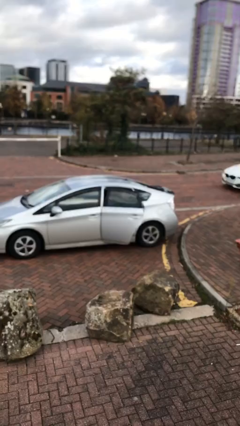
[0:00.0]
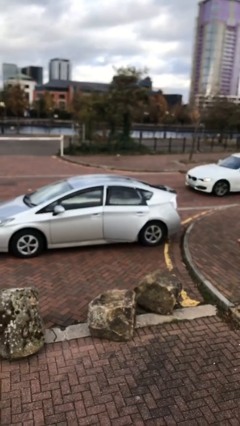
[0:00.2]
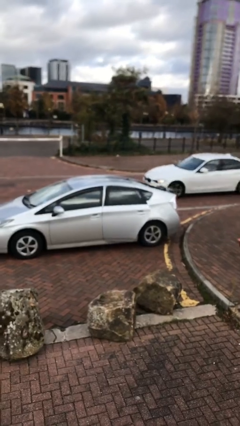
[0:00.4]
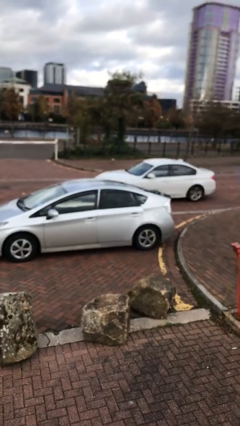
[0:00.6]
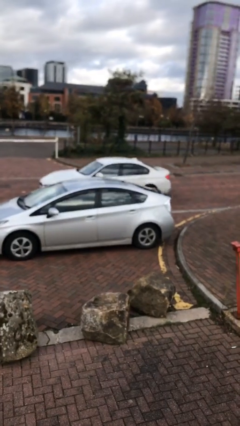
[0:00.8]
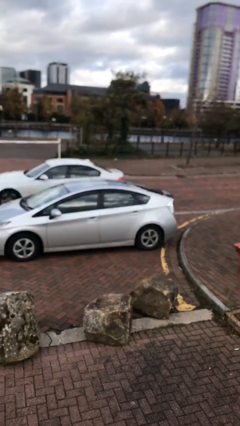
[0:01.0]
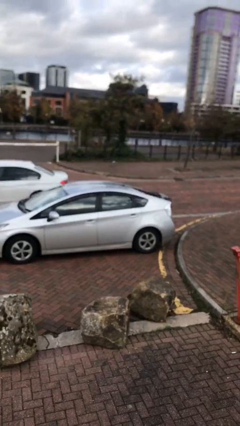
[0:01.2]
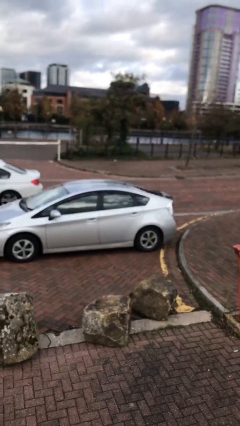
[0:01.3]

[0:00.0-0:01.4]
person closes car door

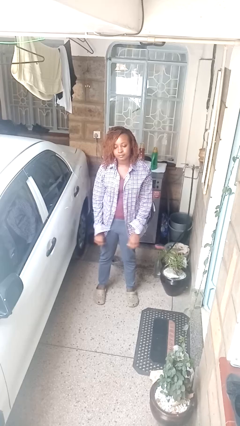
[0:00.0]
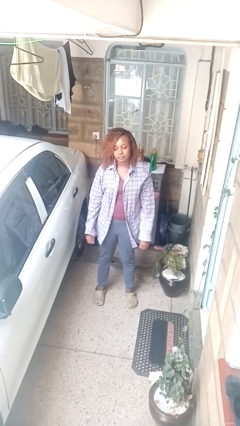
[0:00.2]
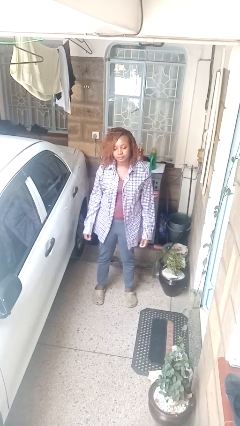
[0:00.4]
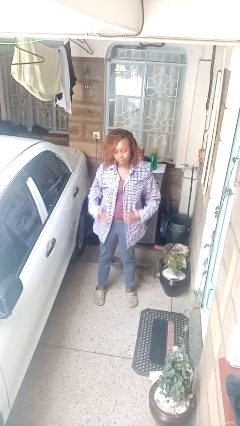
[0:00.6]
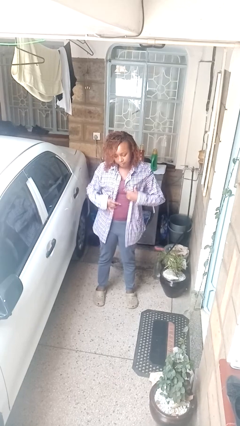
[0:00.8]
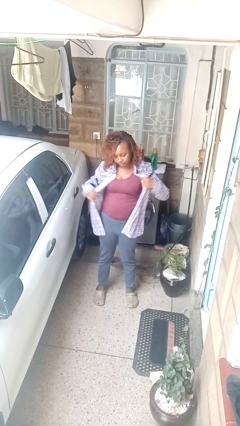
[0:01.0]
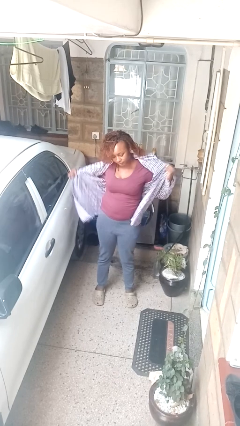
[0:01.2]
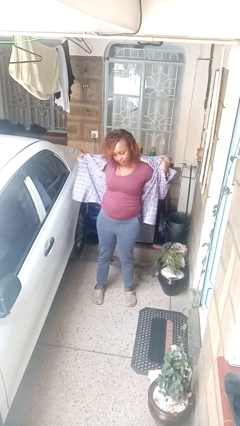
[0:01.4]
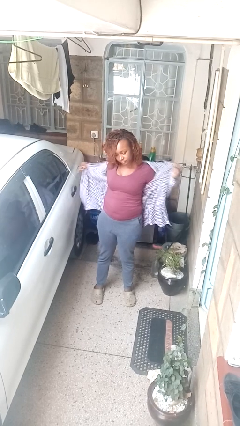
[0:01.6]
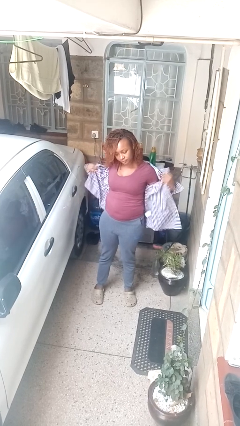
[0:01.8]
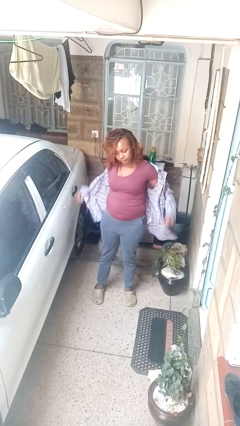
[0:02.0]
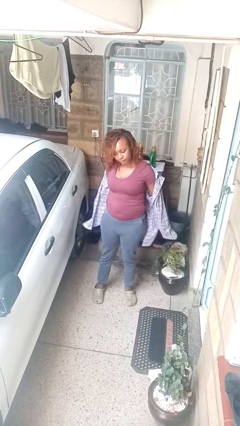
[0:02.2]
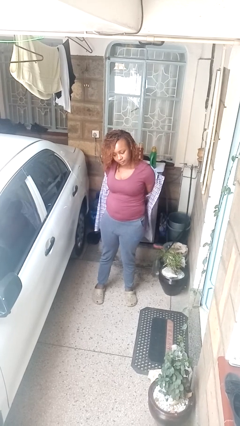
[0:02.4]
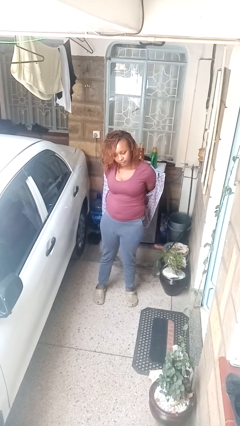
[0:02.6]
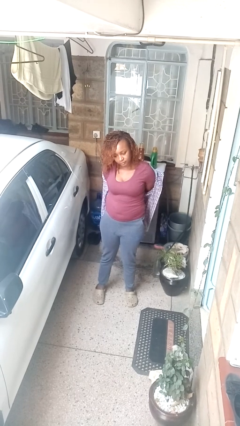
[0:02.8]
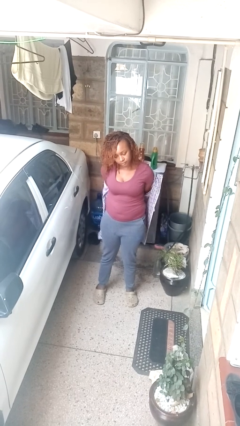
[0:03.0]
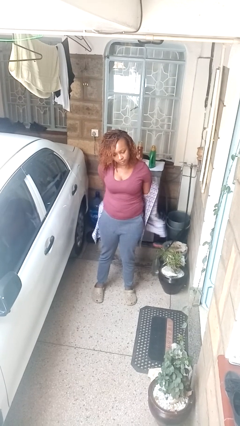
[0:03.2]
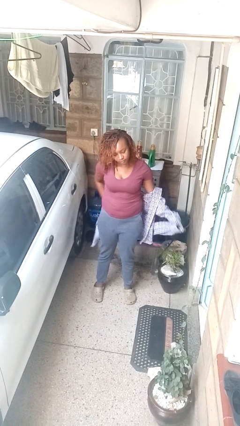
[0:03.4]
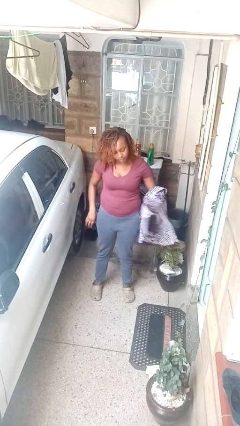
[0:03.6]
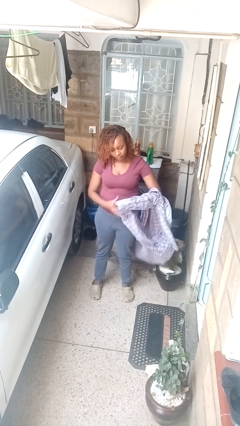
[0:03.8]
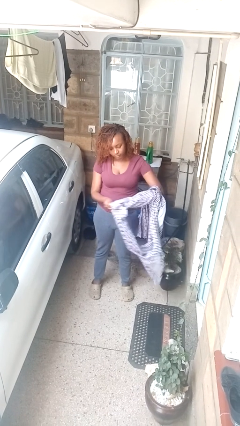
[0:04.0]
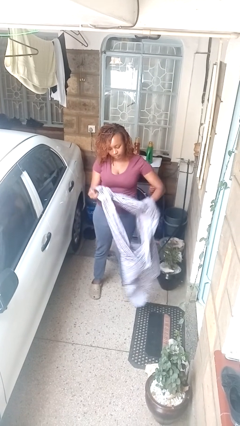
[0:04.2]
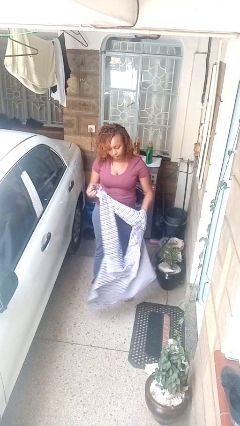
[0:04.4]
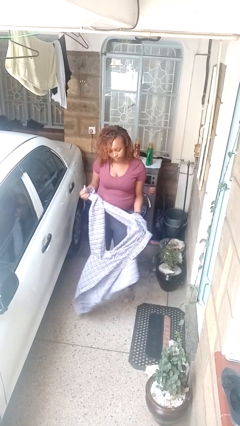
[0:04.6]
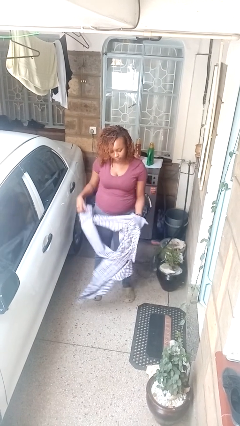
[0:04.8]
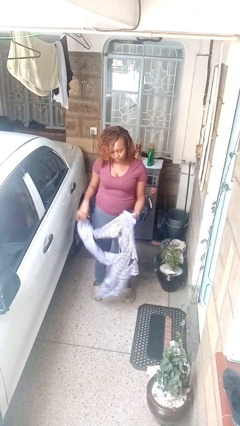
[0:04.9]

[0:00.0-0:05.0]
person takes off shirt

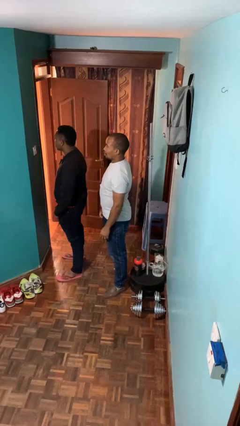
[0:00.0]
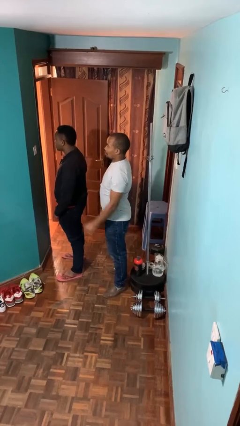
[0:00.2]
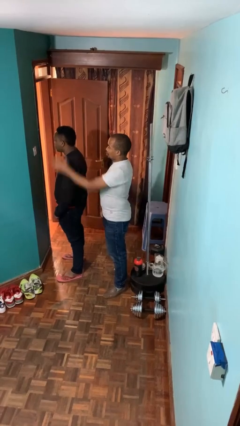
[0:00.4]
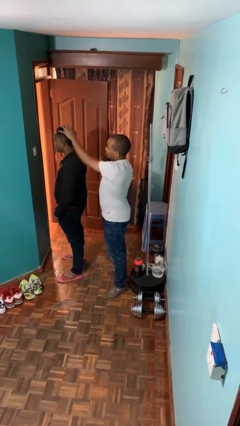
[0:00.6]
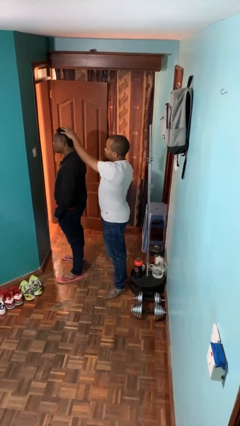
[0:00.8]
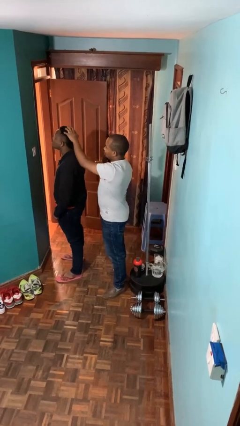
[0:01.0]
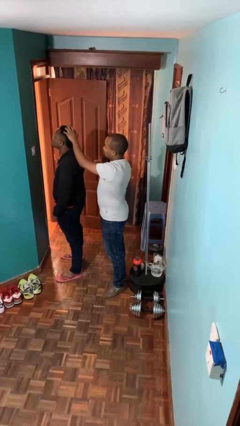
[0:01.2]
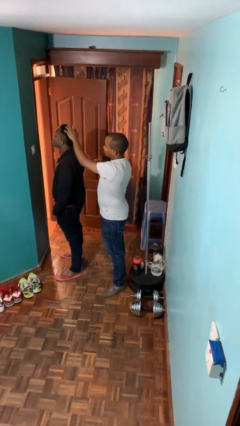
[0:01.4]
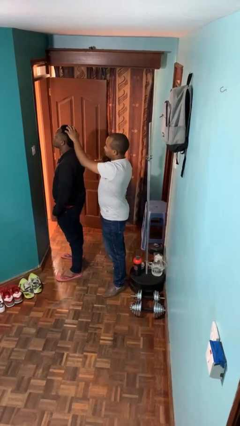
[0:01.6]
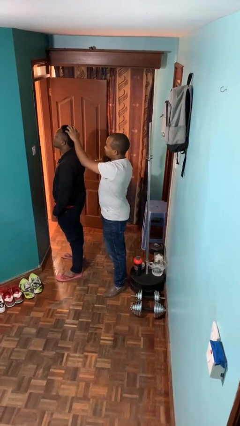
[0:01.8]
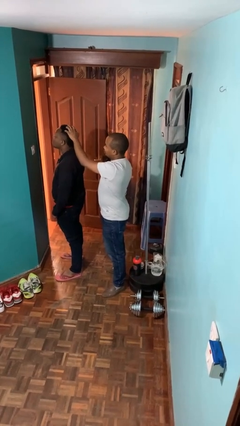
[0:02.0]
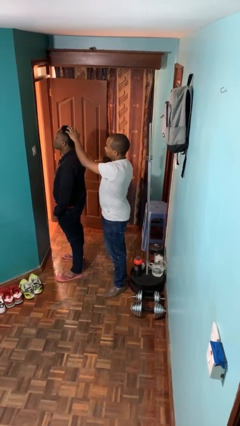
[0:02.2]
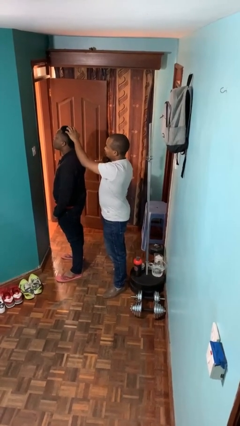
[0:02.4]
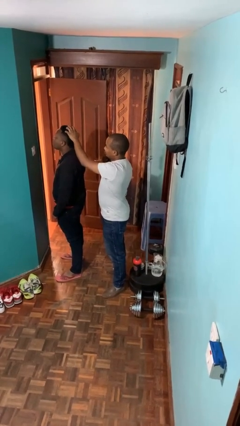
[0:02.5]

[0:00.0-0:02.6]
person grabs person by hair

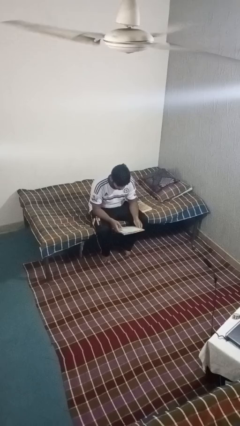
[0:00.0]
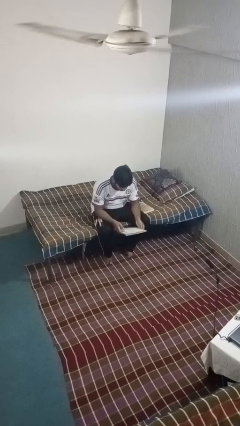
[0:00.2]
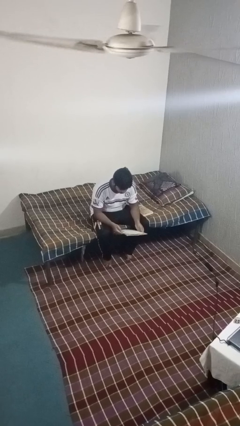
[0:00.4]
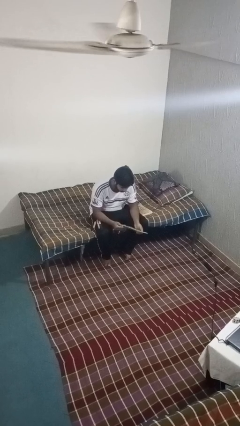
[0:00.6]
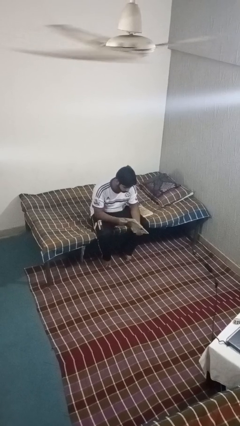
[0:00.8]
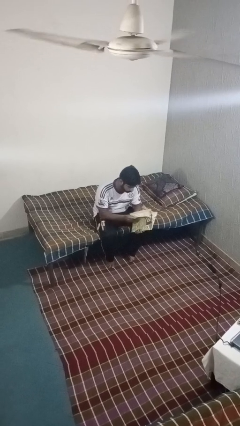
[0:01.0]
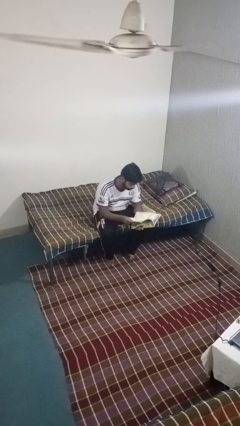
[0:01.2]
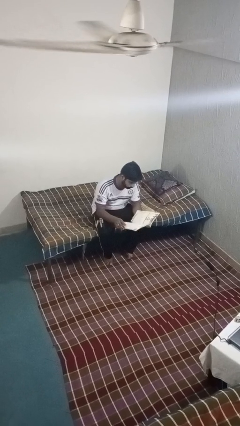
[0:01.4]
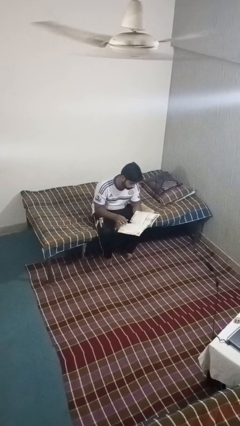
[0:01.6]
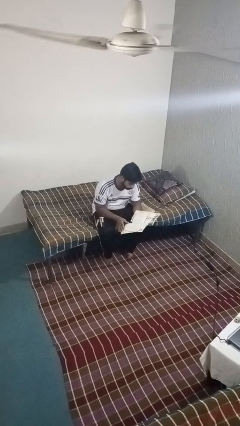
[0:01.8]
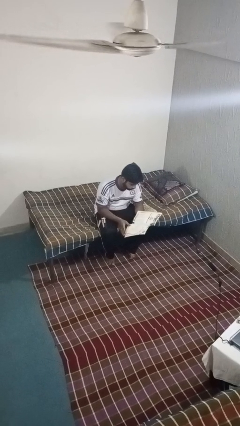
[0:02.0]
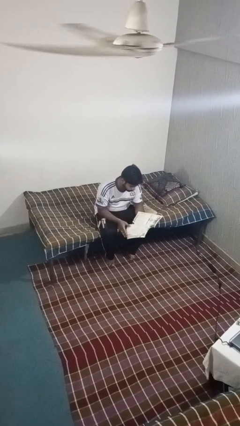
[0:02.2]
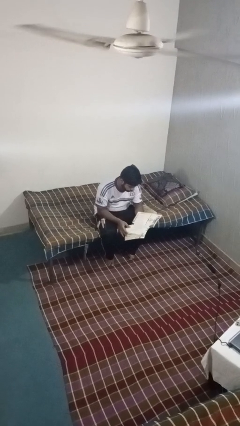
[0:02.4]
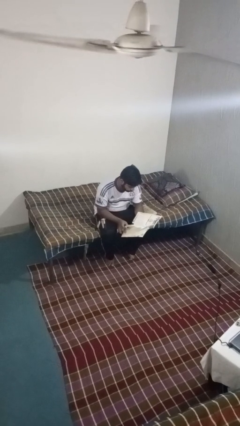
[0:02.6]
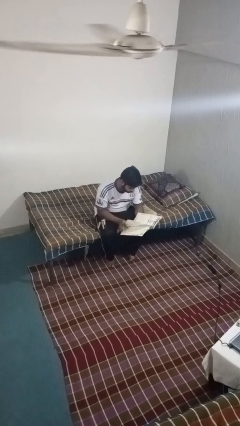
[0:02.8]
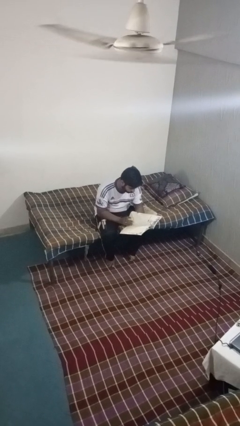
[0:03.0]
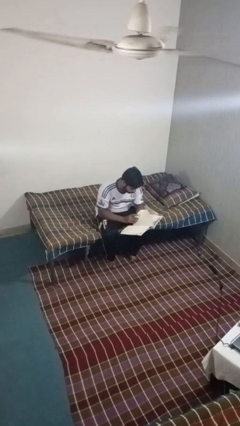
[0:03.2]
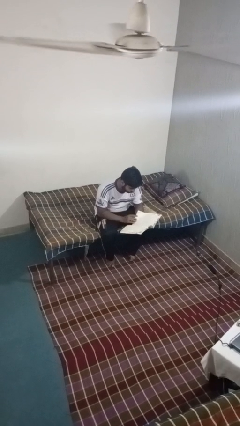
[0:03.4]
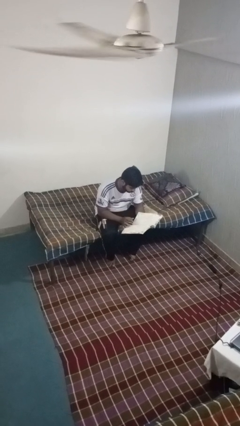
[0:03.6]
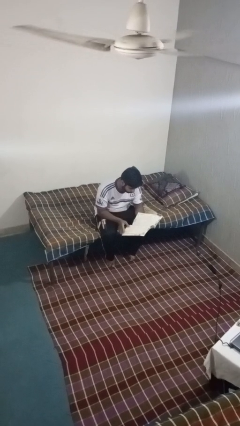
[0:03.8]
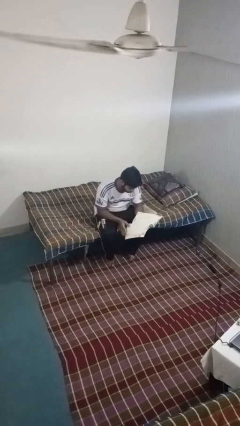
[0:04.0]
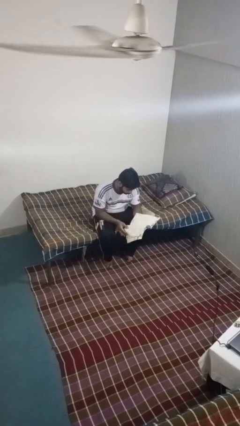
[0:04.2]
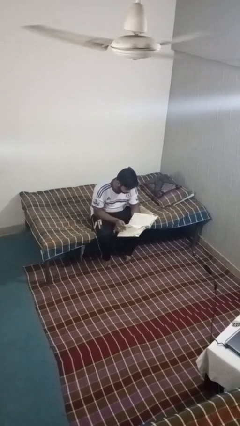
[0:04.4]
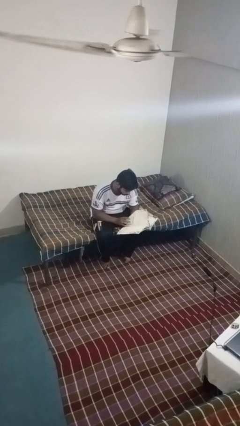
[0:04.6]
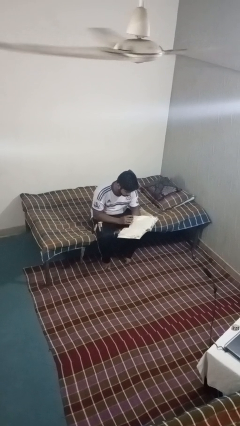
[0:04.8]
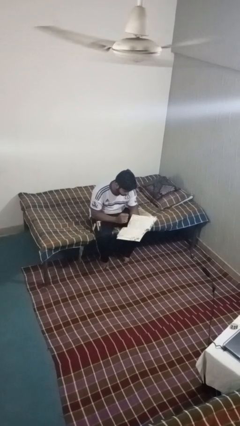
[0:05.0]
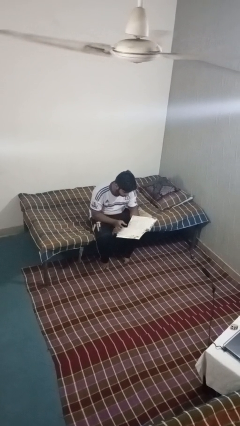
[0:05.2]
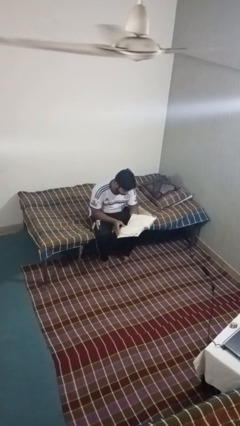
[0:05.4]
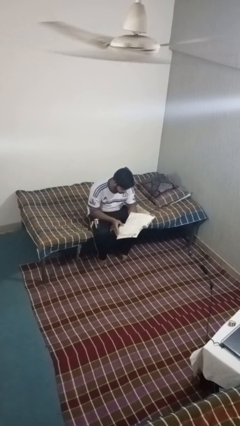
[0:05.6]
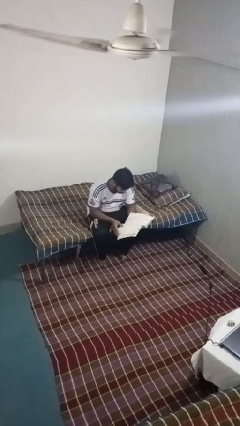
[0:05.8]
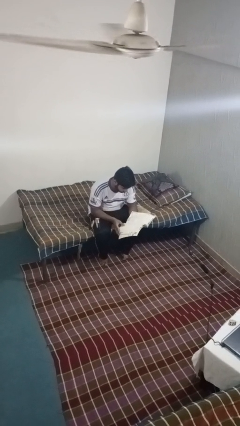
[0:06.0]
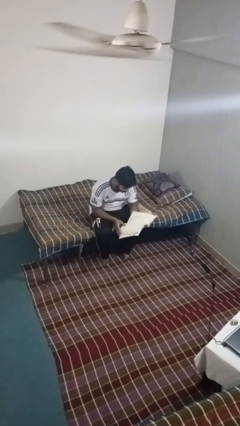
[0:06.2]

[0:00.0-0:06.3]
person reads magazine

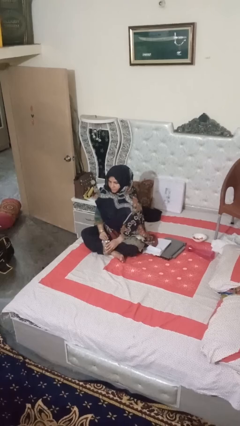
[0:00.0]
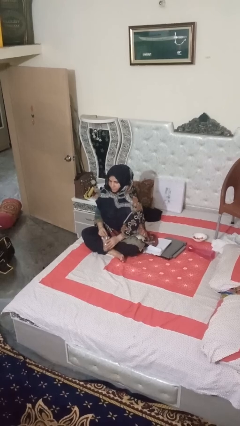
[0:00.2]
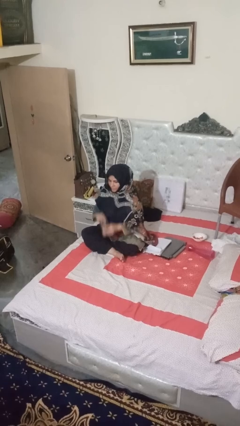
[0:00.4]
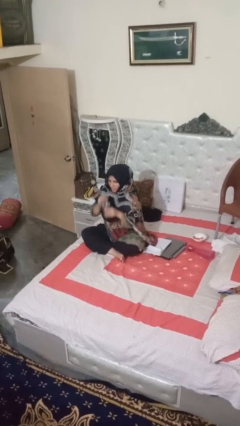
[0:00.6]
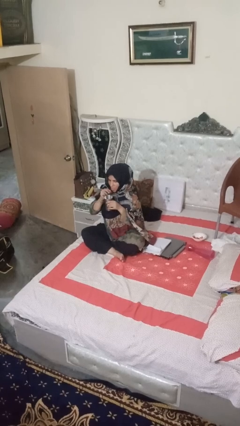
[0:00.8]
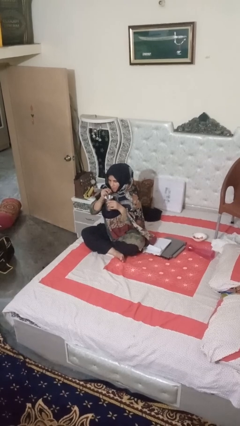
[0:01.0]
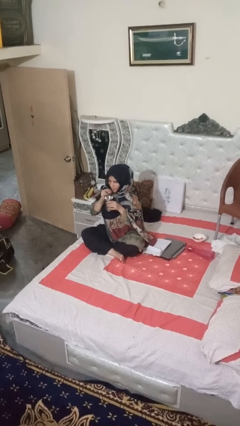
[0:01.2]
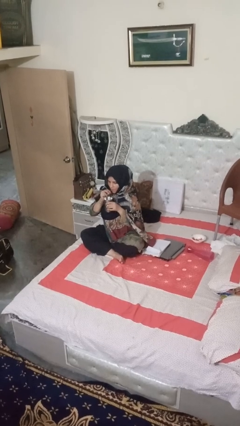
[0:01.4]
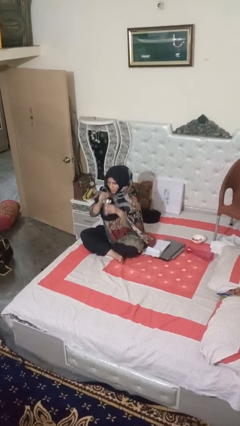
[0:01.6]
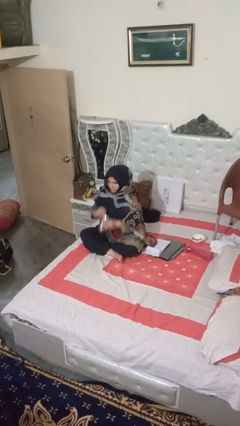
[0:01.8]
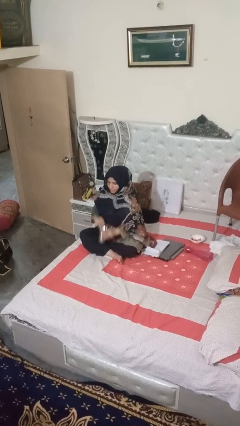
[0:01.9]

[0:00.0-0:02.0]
person drinks from straw

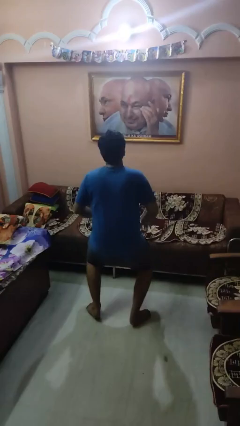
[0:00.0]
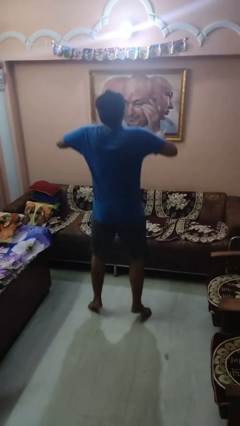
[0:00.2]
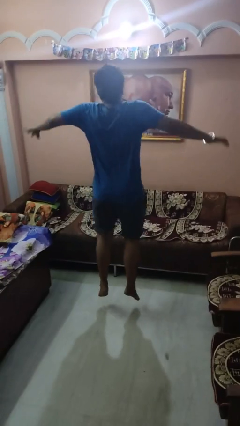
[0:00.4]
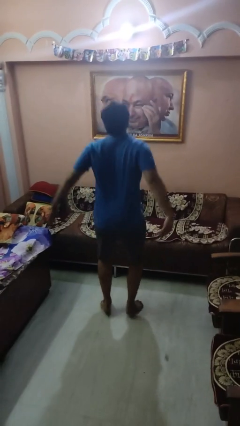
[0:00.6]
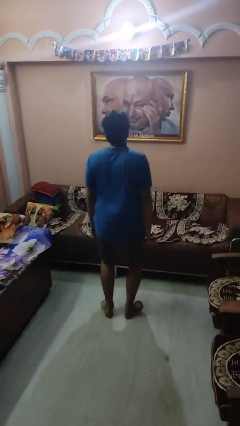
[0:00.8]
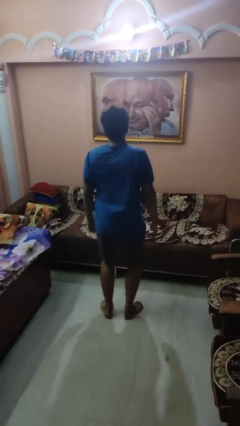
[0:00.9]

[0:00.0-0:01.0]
person jumps
